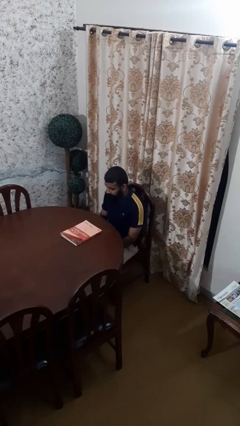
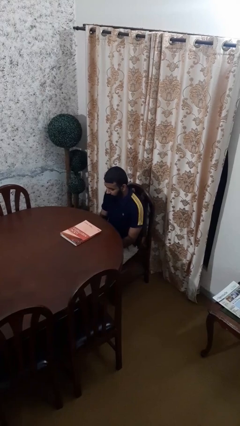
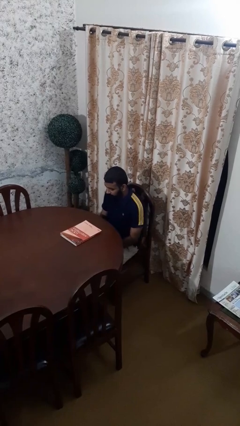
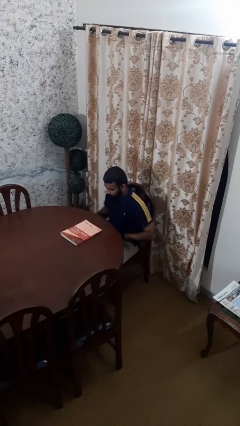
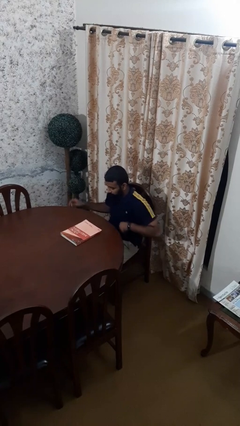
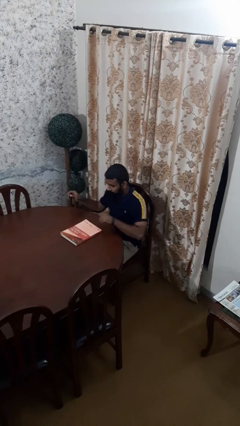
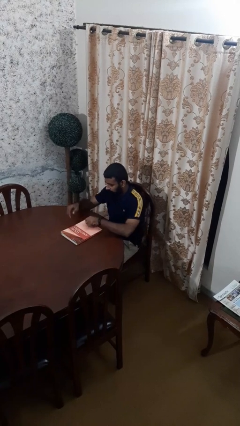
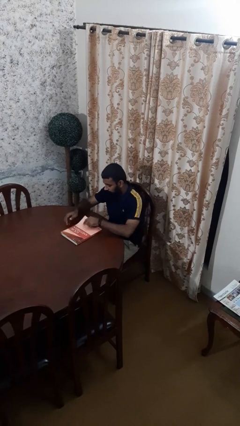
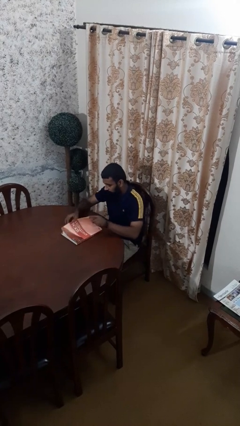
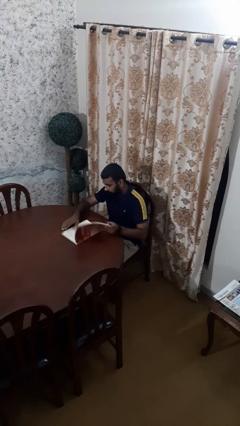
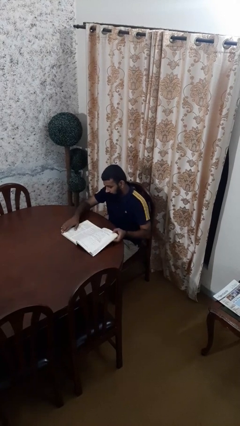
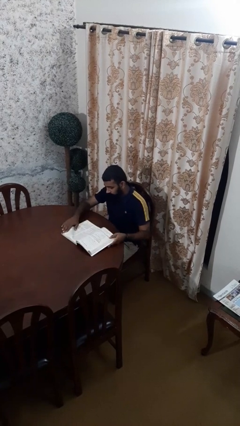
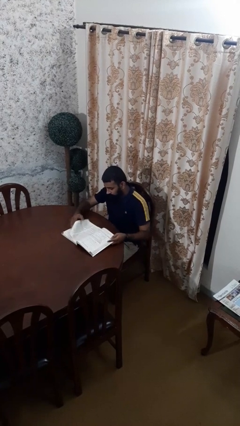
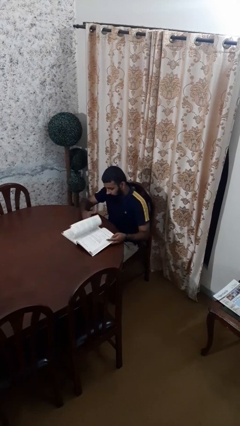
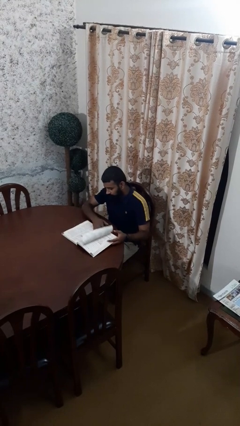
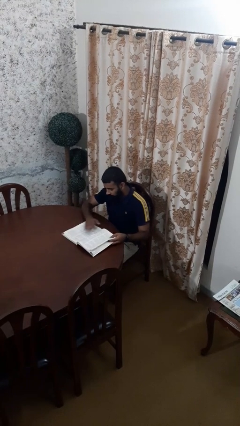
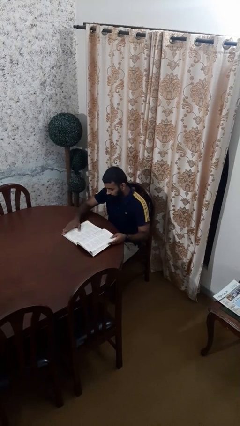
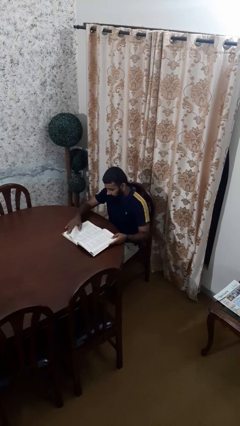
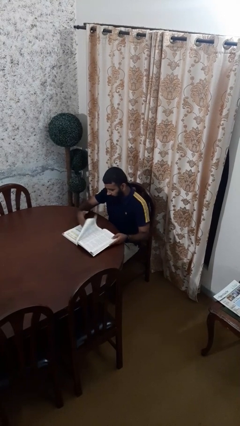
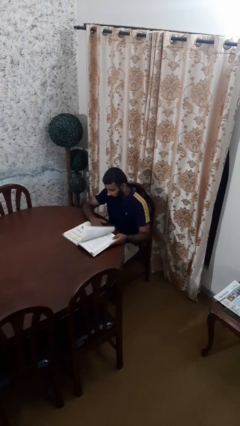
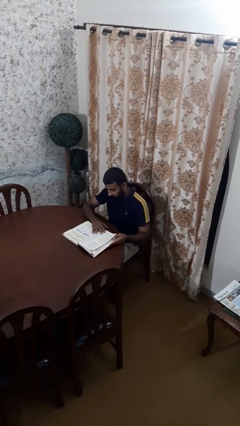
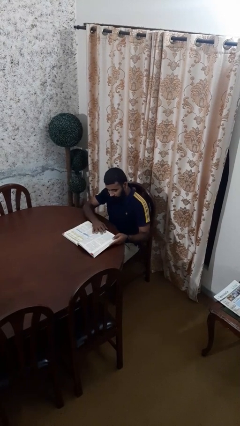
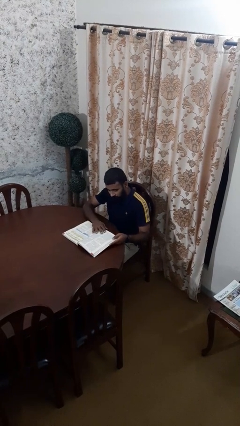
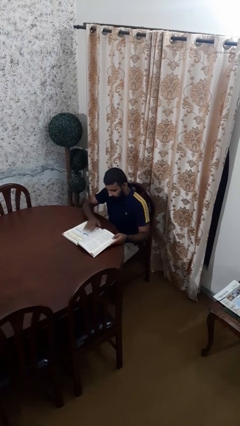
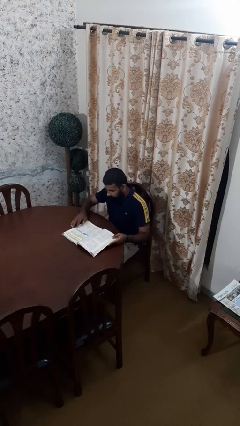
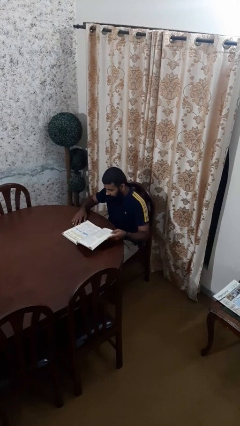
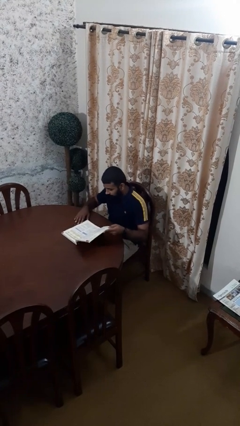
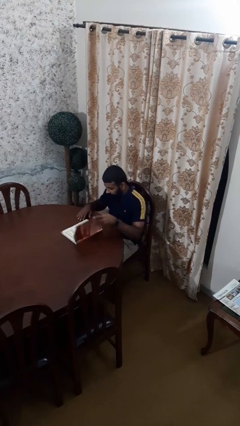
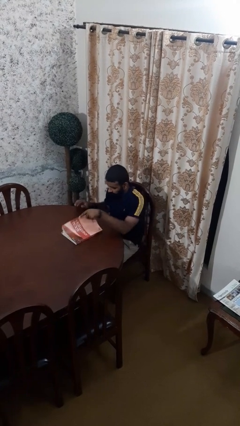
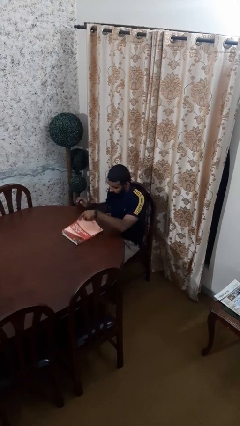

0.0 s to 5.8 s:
person reads book

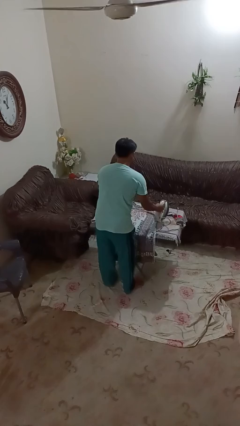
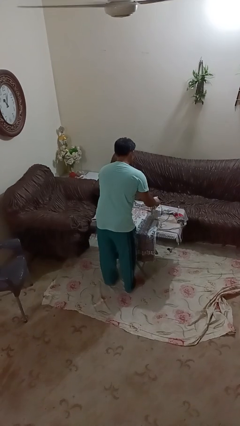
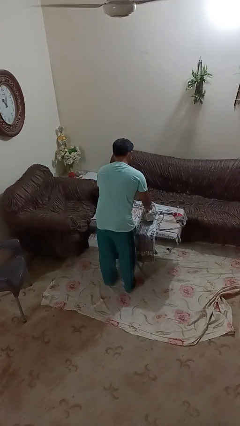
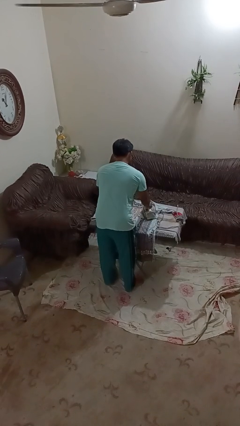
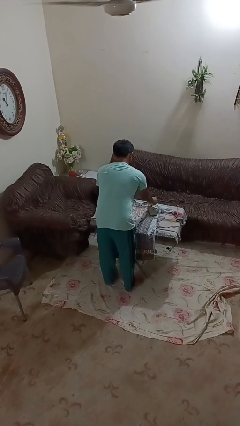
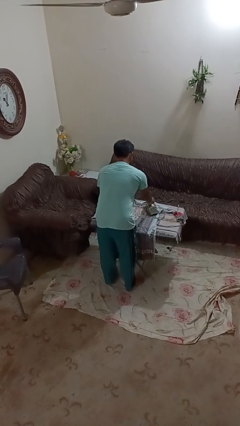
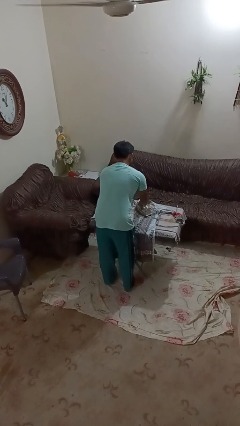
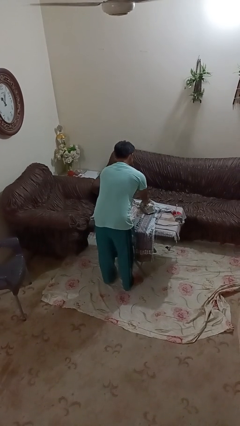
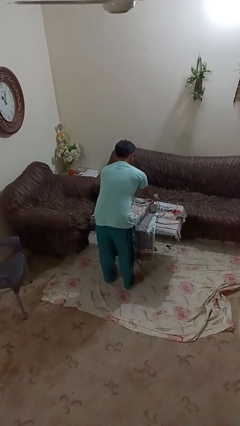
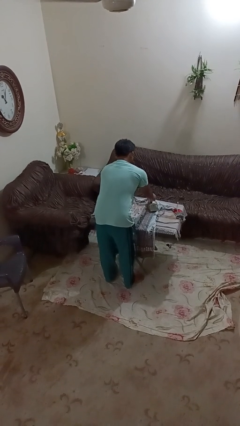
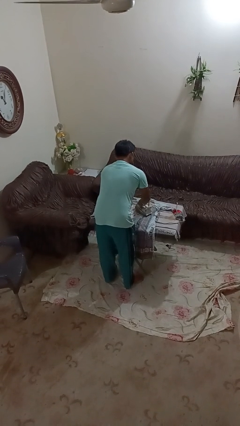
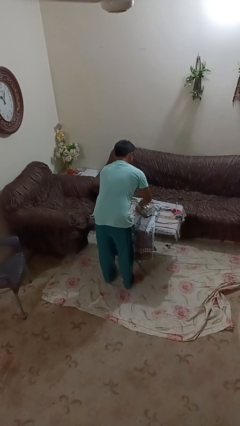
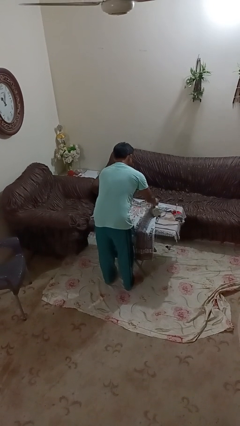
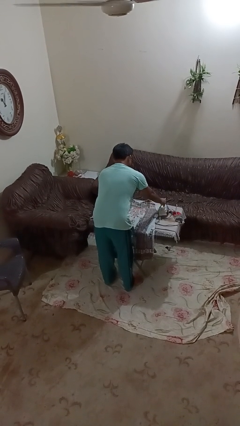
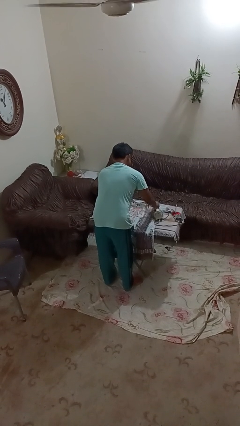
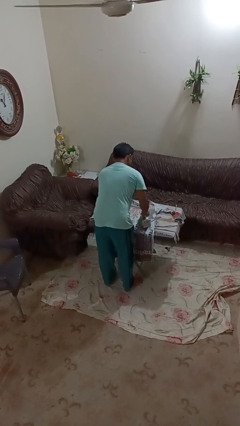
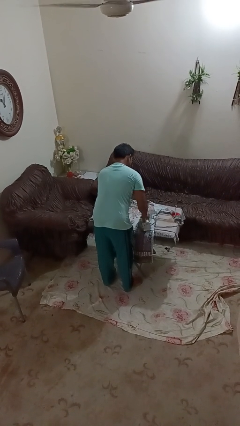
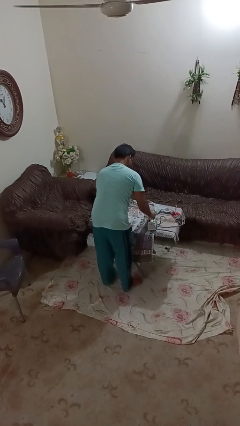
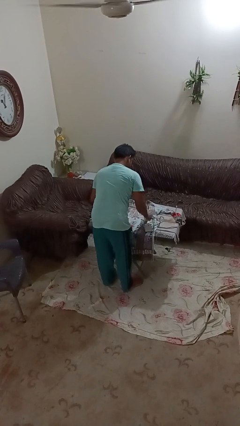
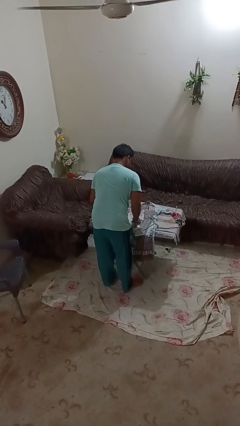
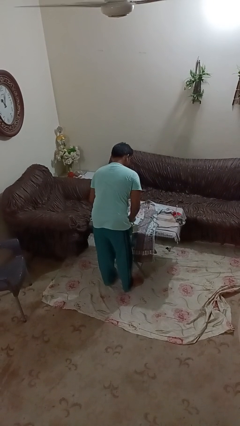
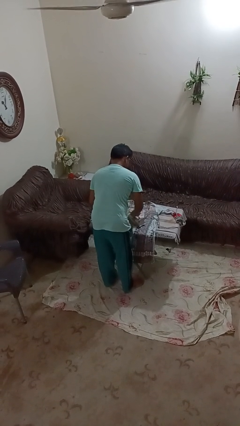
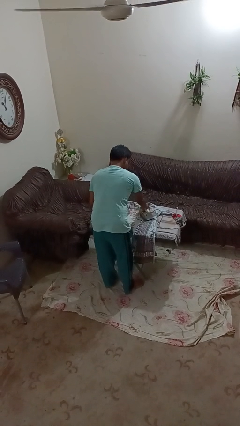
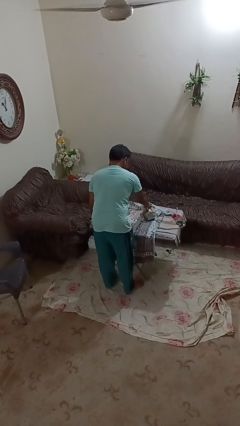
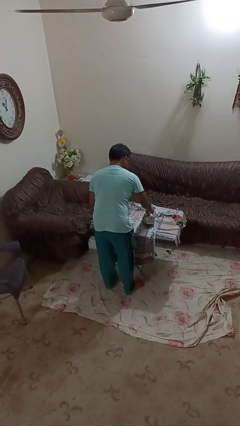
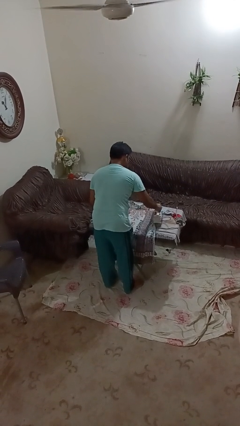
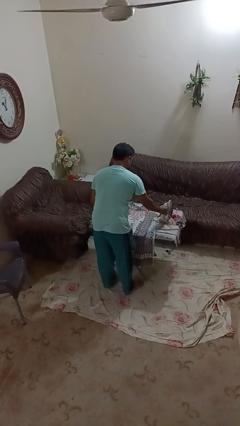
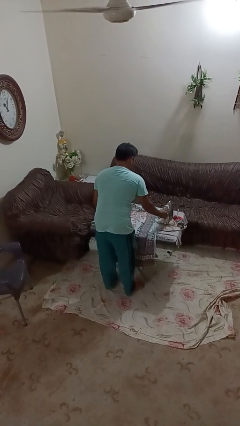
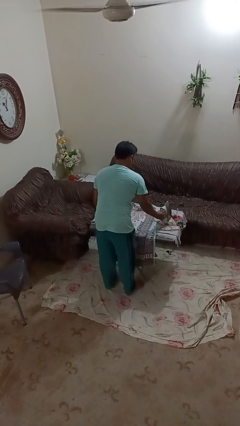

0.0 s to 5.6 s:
person irons clothes

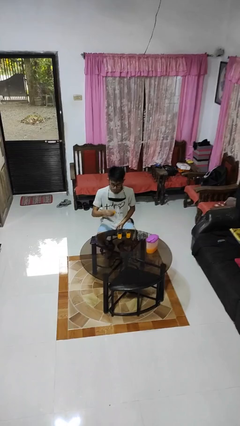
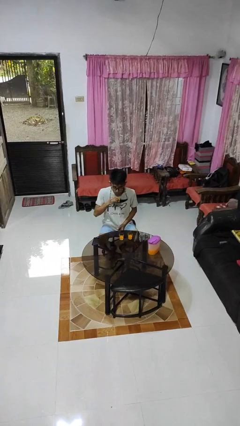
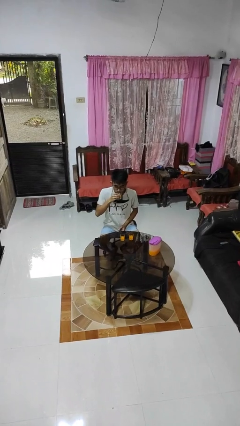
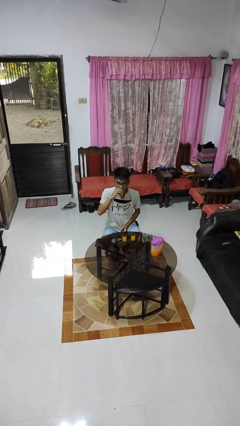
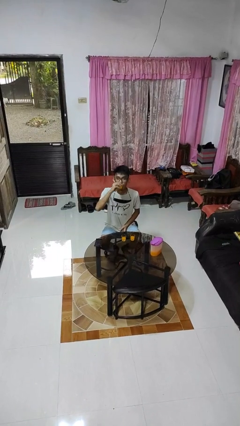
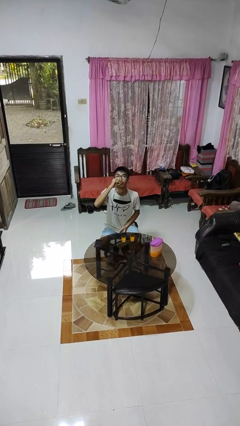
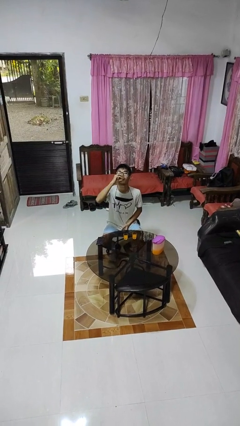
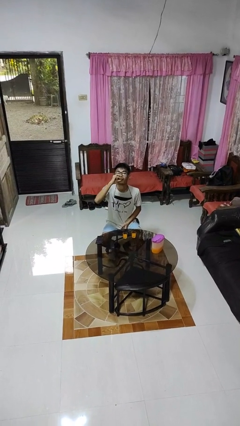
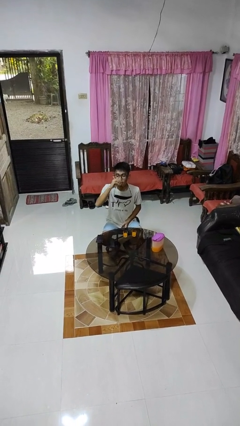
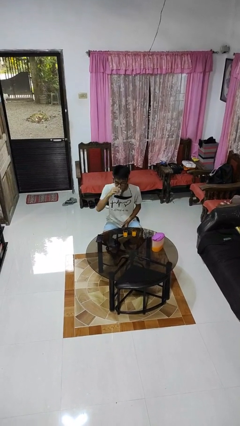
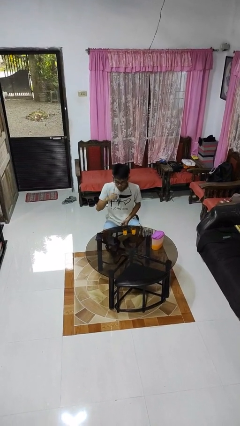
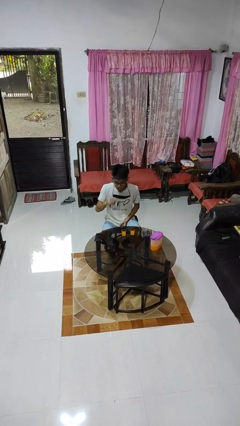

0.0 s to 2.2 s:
person drinks from shotglass

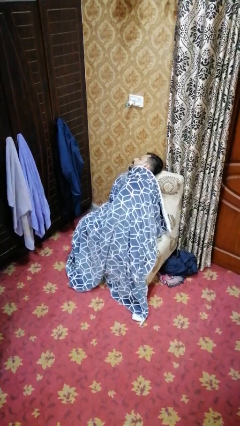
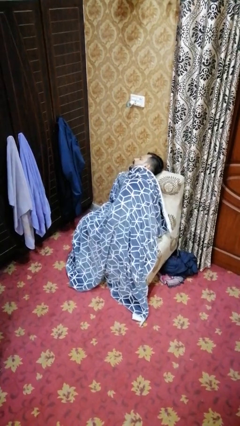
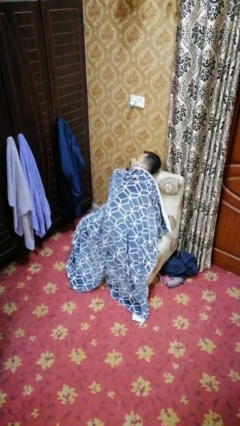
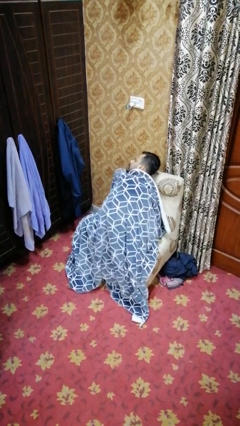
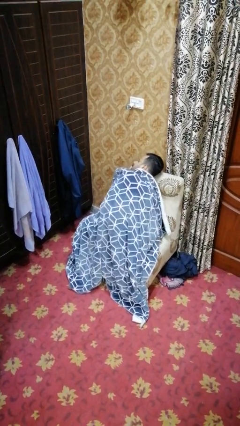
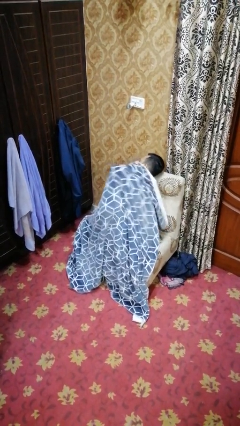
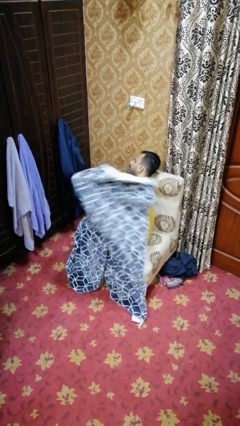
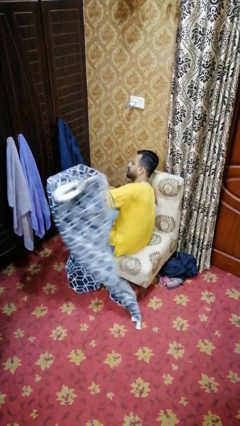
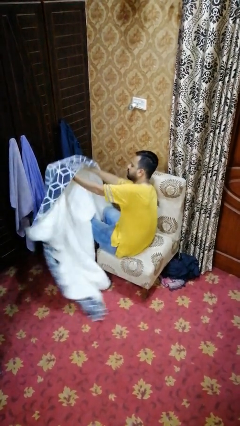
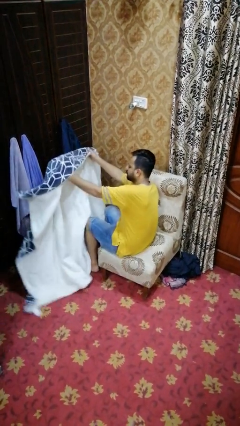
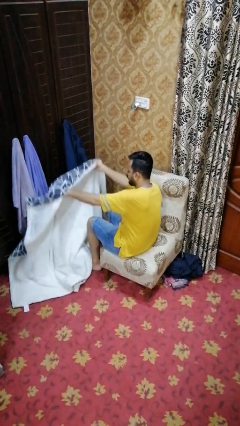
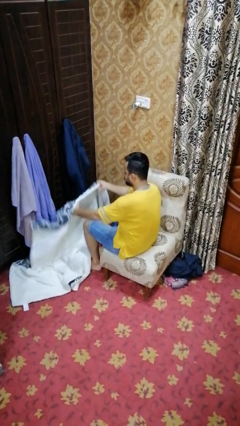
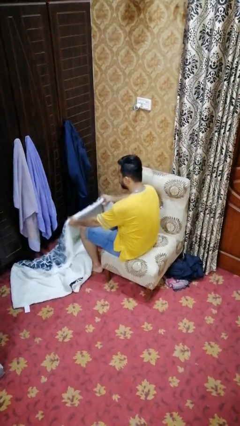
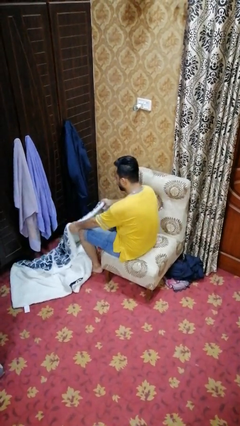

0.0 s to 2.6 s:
person uncovers with blanket

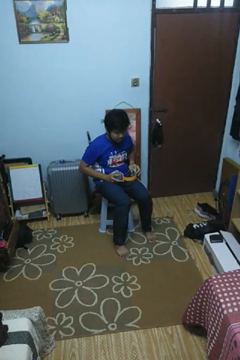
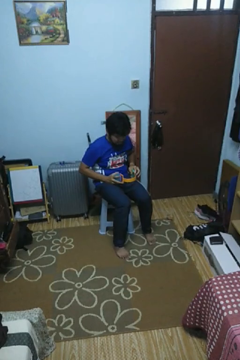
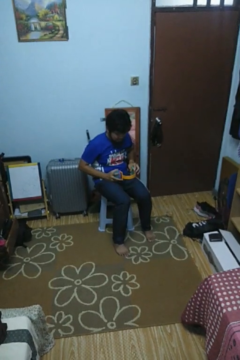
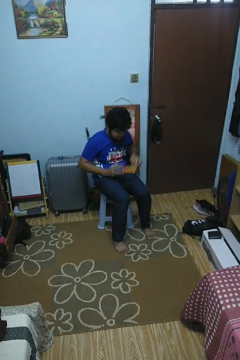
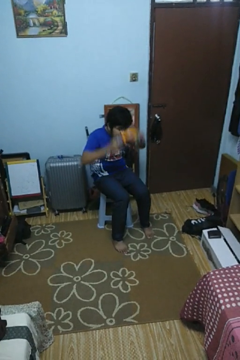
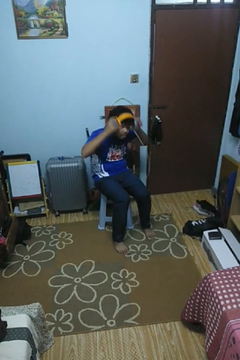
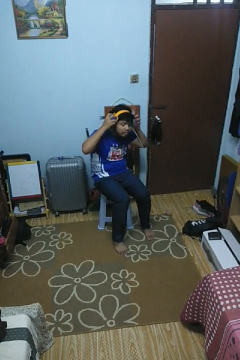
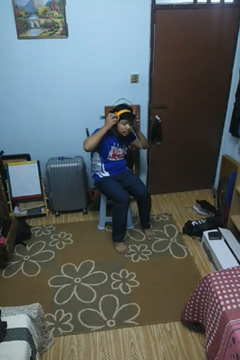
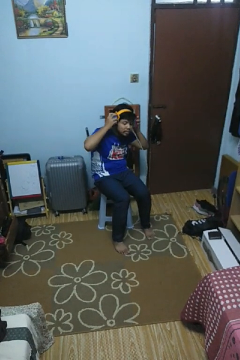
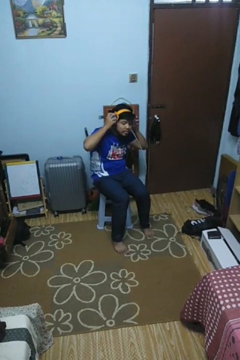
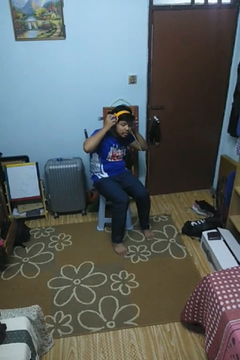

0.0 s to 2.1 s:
person puts on headphones
